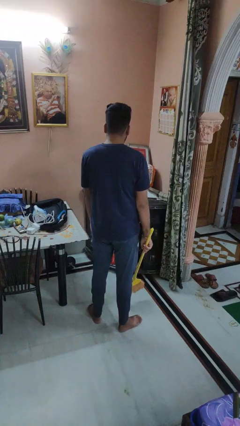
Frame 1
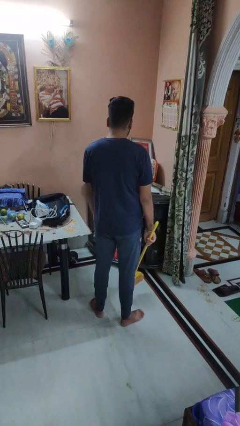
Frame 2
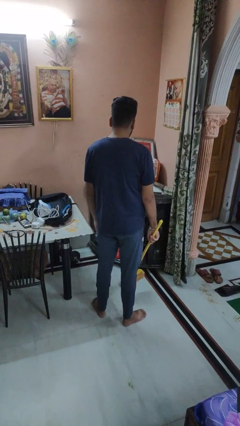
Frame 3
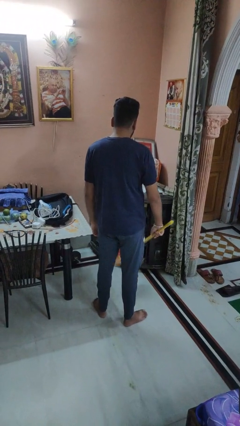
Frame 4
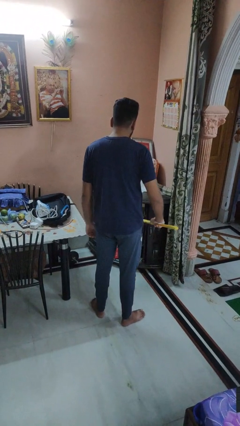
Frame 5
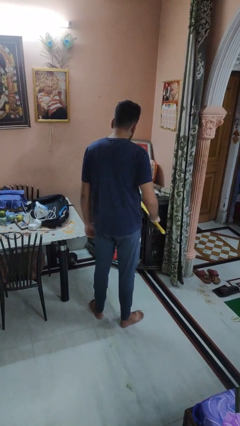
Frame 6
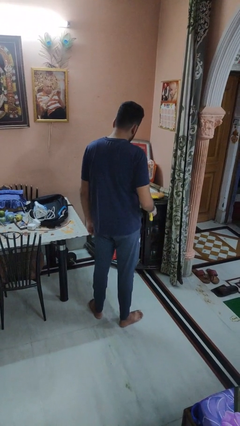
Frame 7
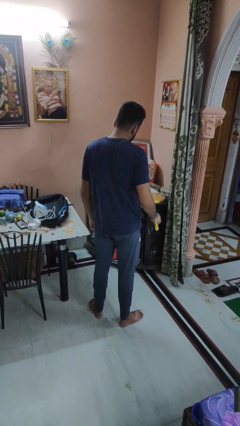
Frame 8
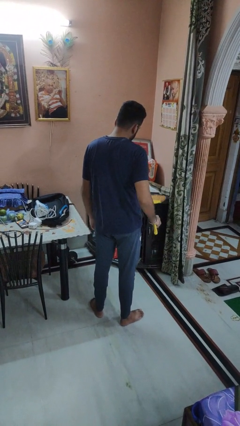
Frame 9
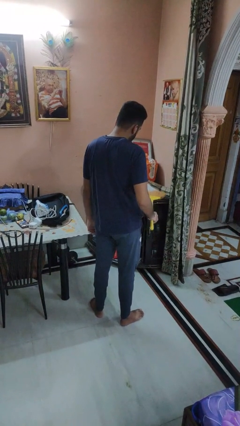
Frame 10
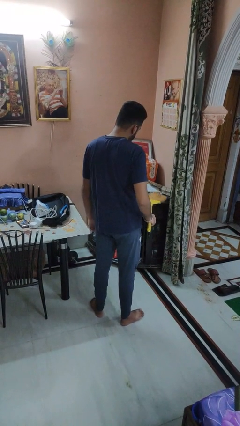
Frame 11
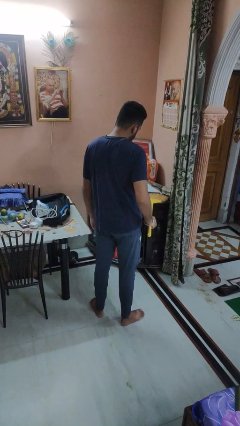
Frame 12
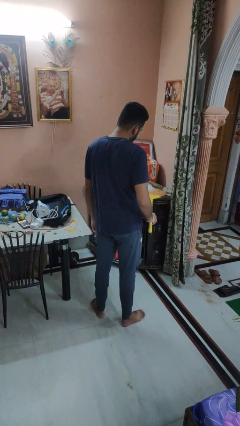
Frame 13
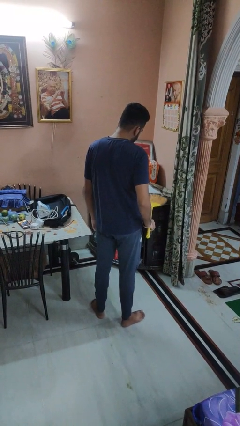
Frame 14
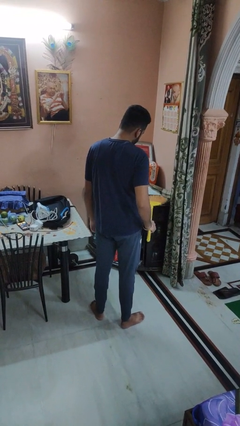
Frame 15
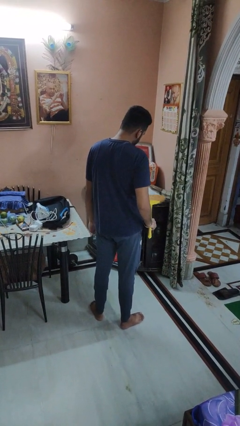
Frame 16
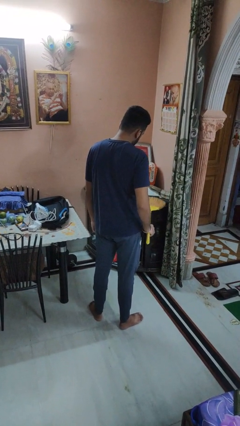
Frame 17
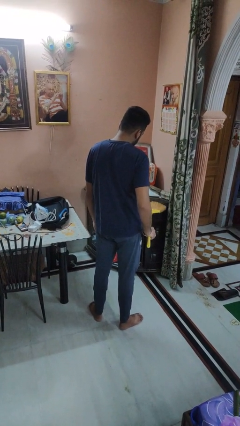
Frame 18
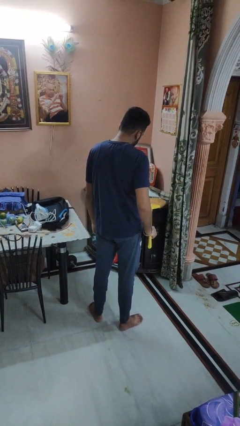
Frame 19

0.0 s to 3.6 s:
person dusts furniture

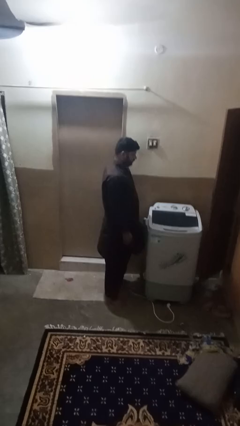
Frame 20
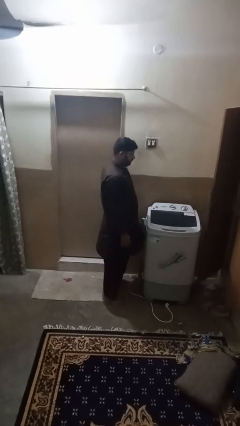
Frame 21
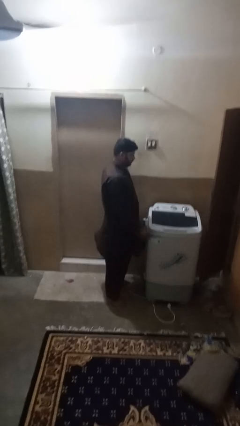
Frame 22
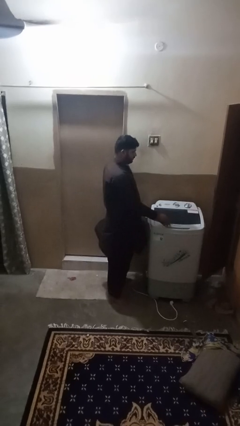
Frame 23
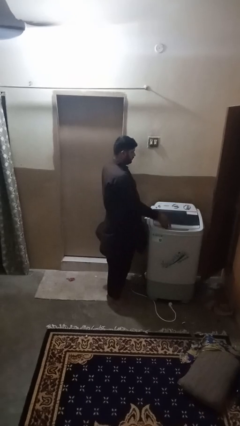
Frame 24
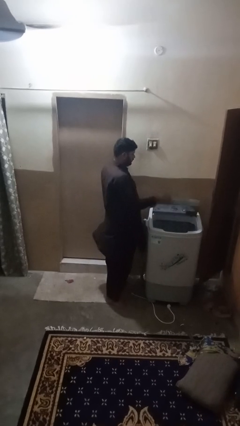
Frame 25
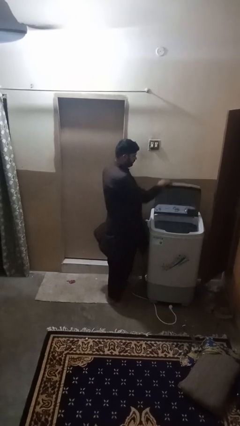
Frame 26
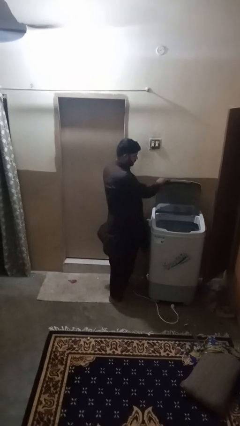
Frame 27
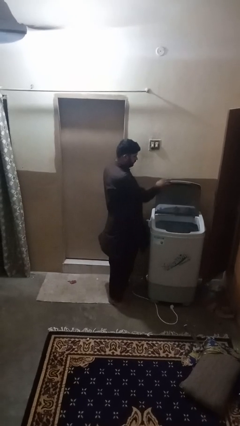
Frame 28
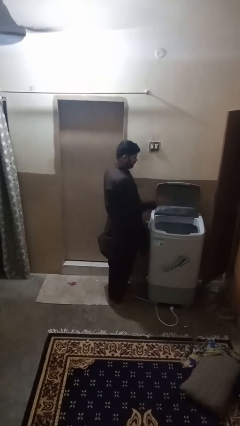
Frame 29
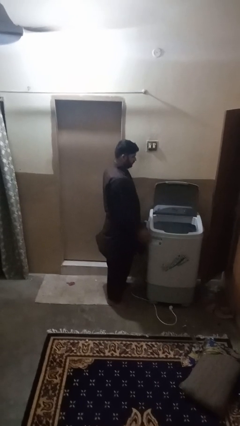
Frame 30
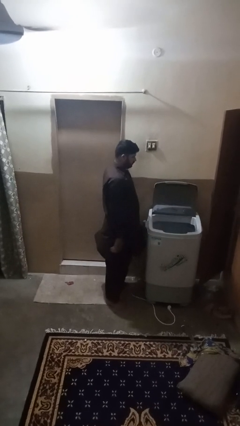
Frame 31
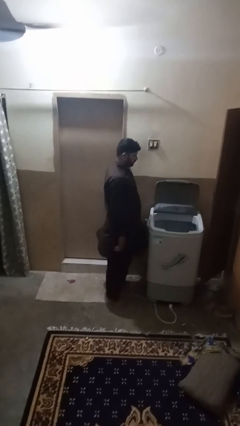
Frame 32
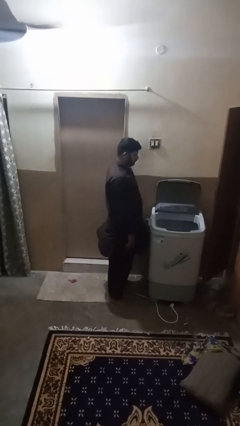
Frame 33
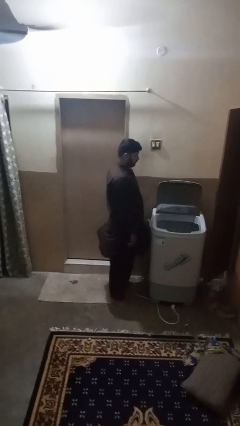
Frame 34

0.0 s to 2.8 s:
person opens clothes washer

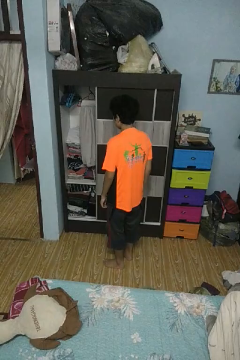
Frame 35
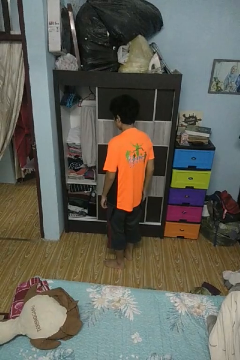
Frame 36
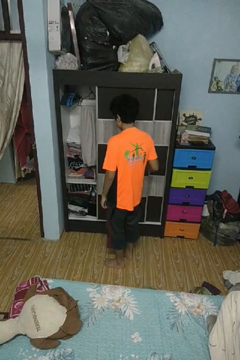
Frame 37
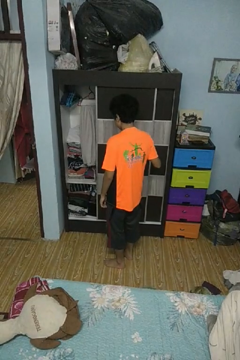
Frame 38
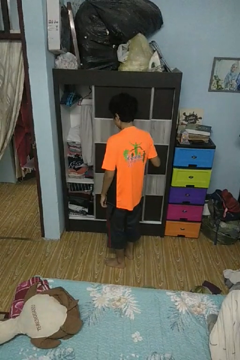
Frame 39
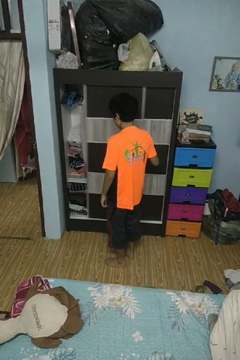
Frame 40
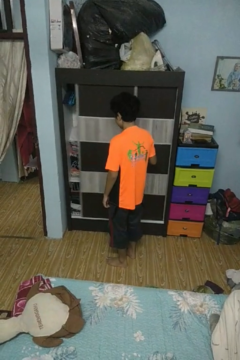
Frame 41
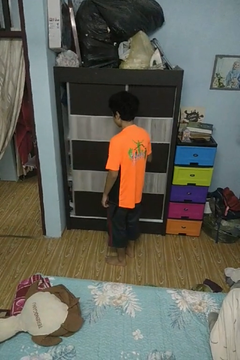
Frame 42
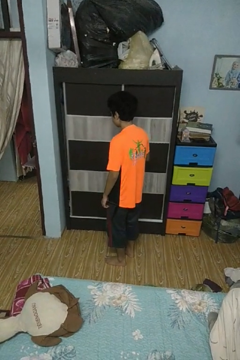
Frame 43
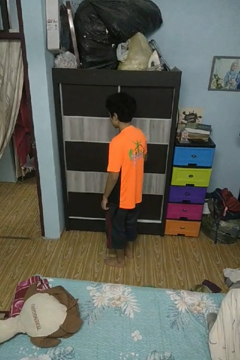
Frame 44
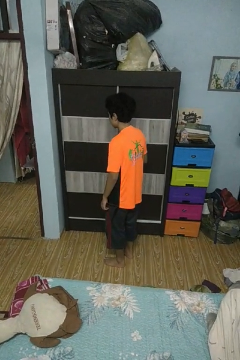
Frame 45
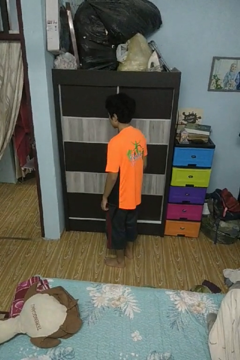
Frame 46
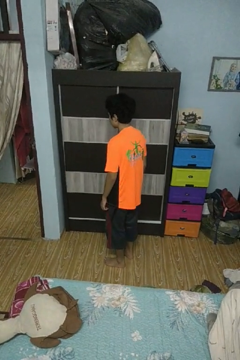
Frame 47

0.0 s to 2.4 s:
person closes closet door

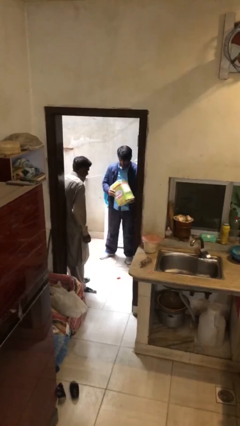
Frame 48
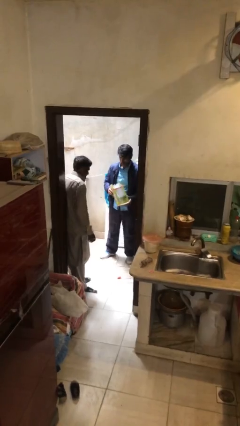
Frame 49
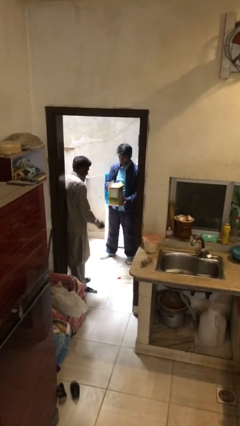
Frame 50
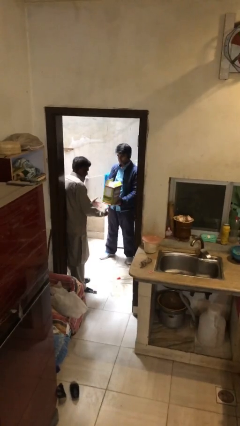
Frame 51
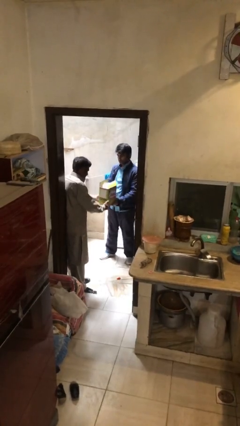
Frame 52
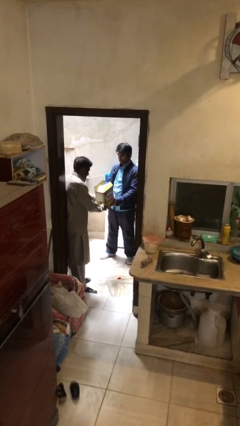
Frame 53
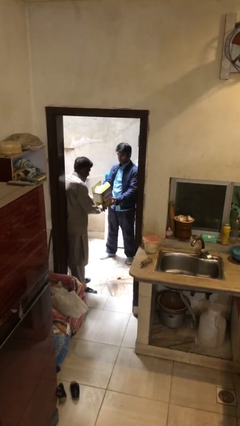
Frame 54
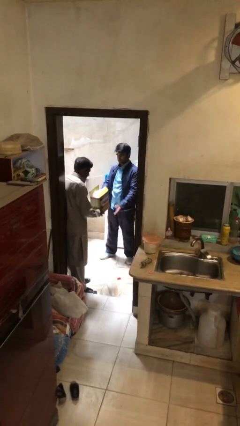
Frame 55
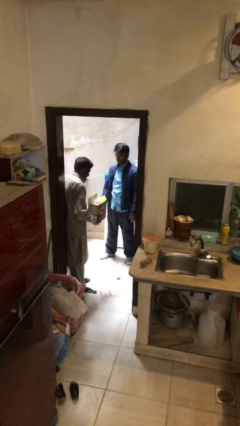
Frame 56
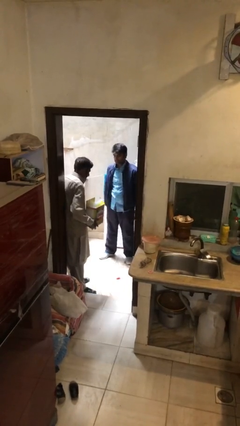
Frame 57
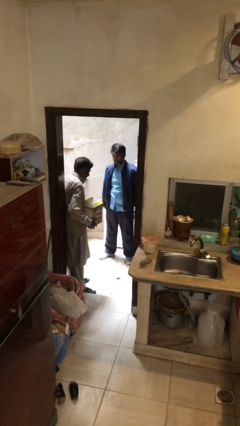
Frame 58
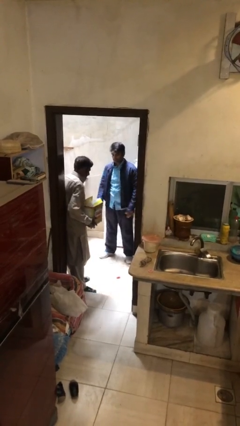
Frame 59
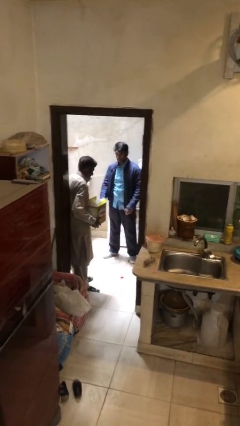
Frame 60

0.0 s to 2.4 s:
person transfers object to person

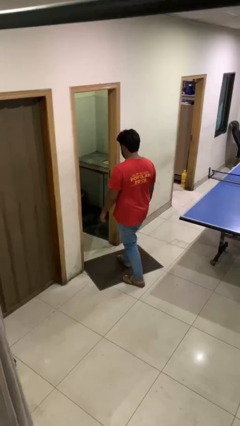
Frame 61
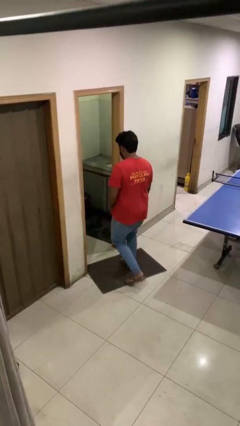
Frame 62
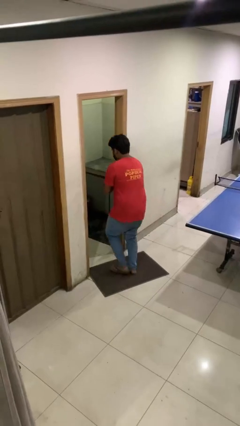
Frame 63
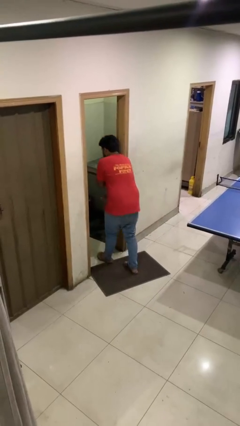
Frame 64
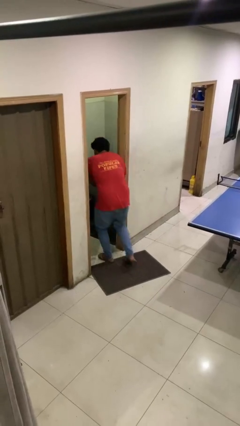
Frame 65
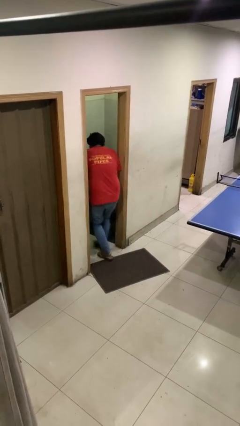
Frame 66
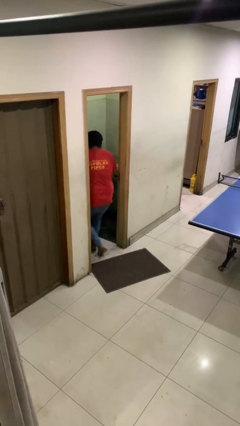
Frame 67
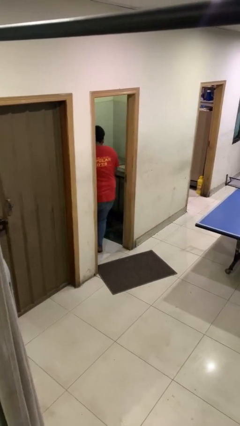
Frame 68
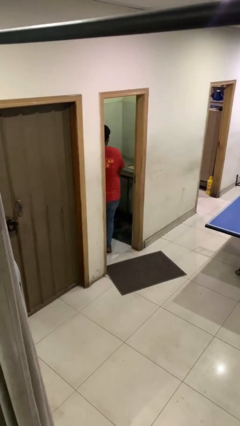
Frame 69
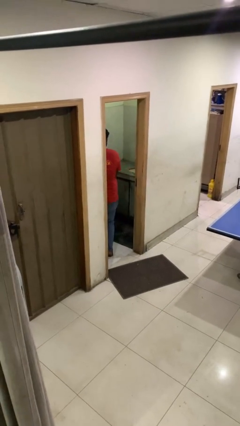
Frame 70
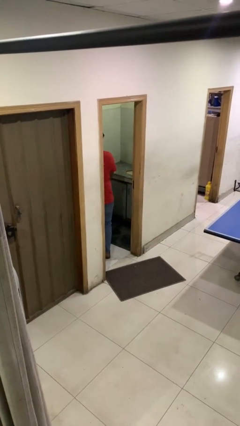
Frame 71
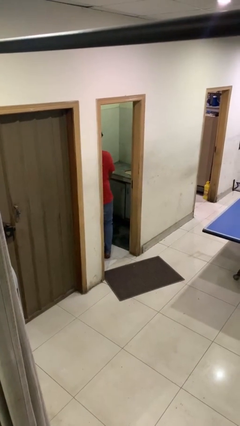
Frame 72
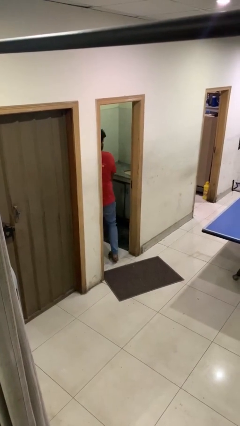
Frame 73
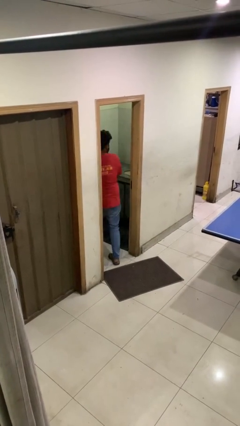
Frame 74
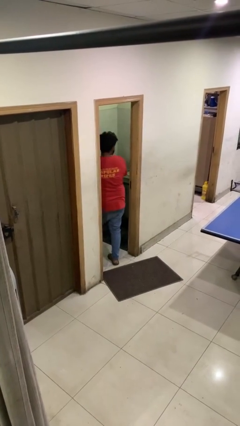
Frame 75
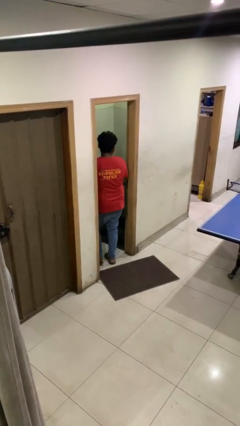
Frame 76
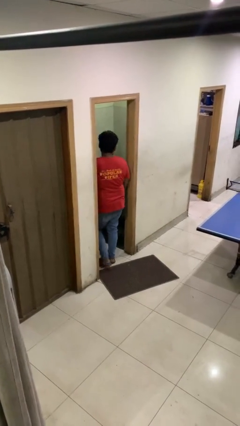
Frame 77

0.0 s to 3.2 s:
person bumps into wall

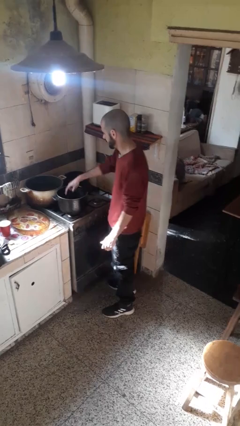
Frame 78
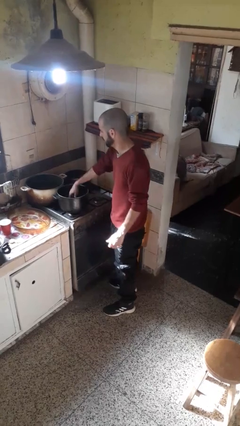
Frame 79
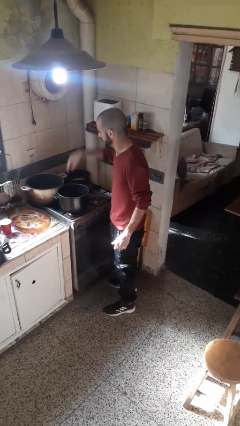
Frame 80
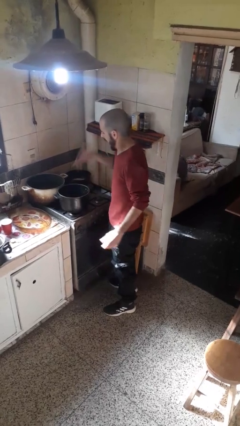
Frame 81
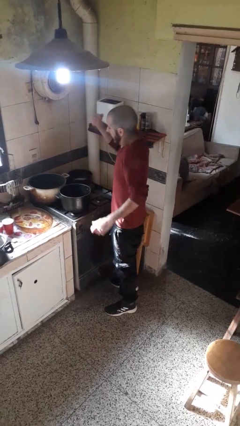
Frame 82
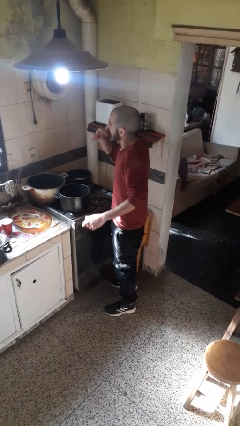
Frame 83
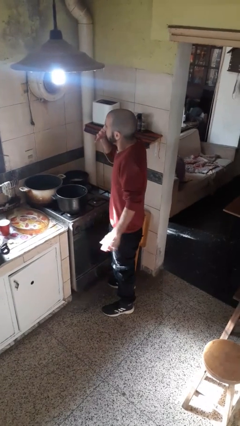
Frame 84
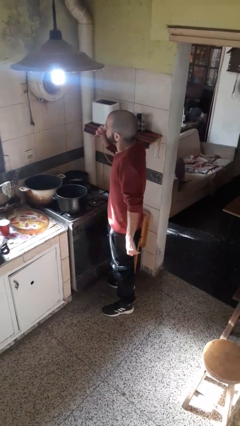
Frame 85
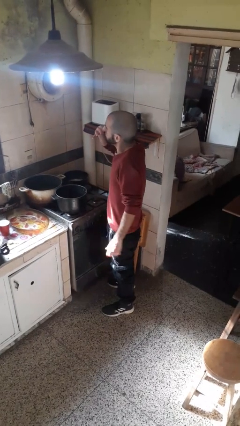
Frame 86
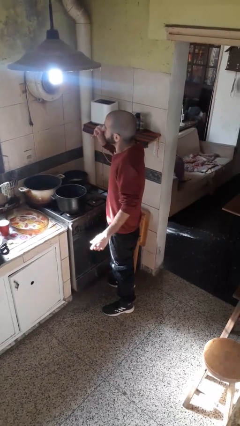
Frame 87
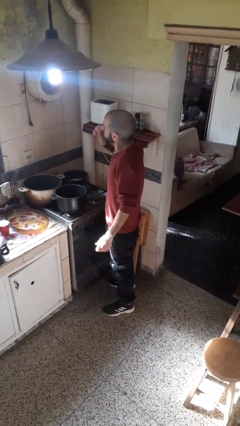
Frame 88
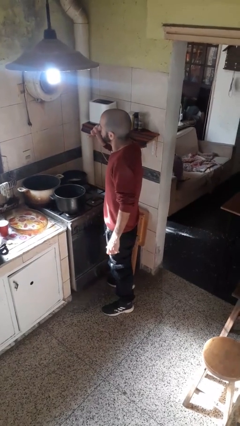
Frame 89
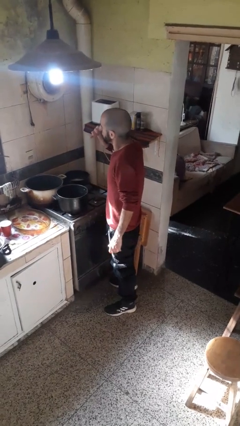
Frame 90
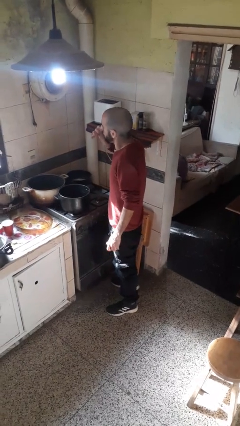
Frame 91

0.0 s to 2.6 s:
person burns hand

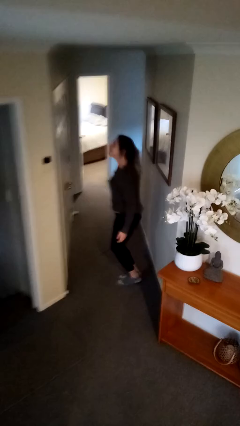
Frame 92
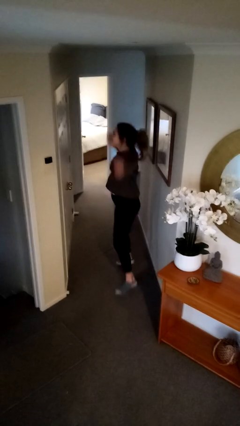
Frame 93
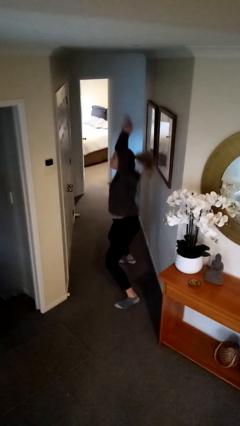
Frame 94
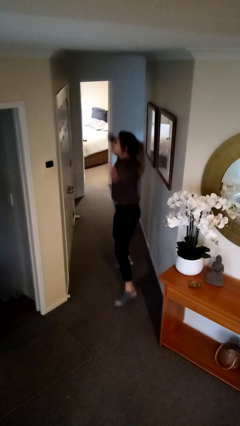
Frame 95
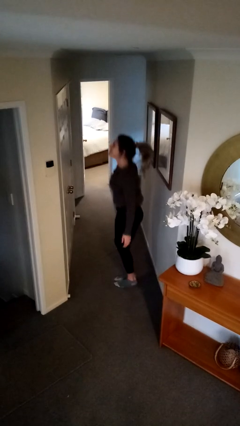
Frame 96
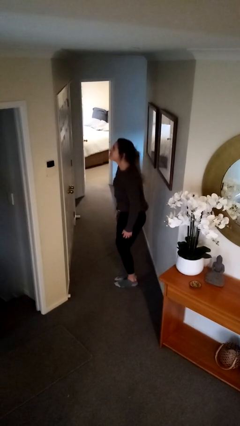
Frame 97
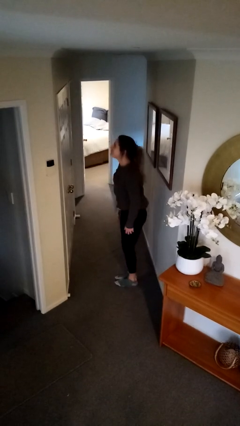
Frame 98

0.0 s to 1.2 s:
person exercises with jumping jacks
